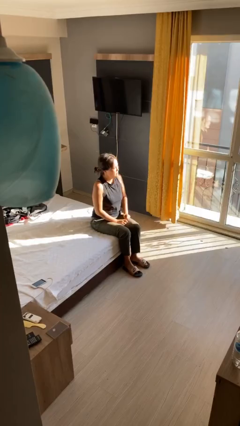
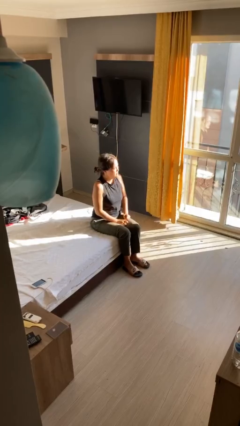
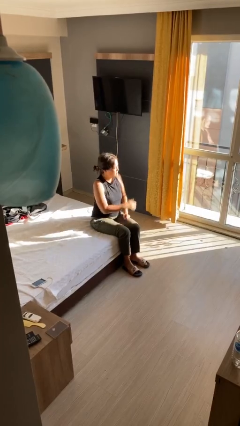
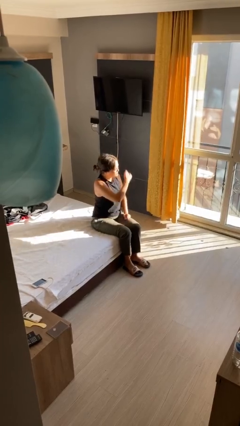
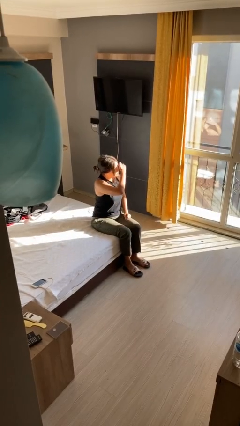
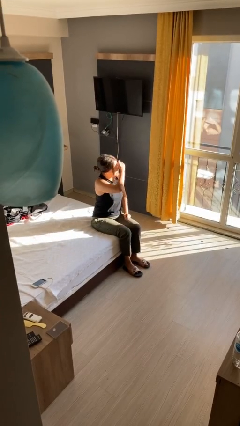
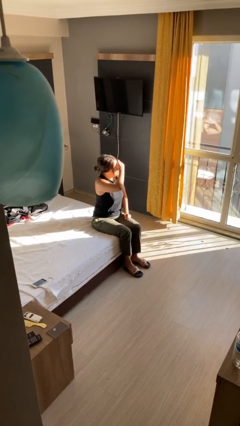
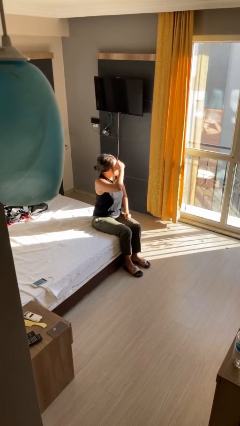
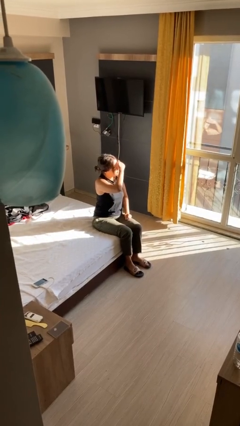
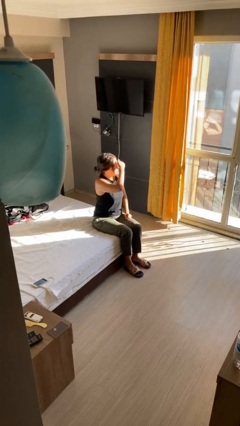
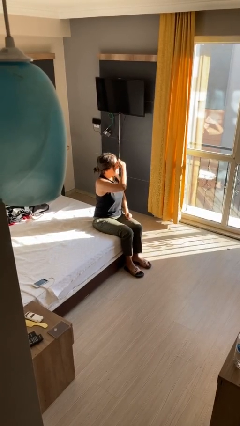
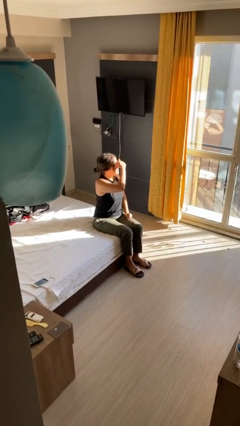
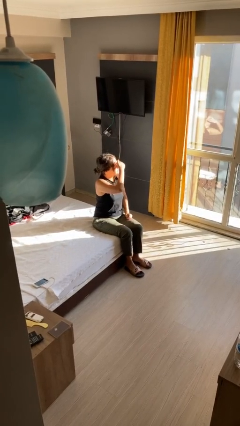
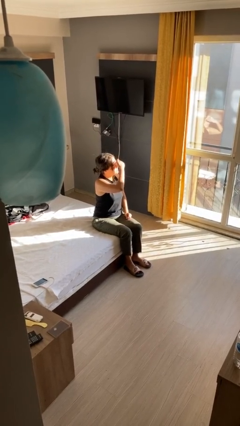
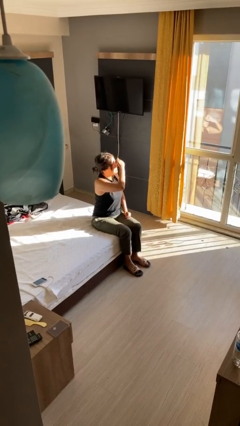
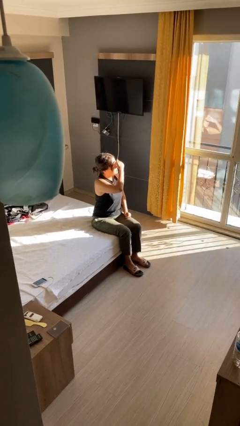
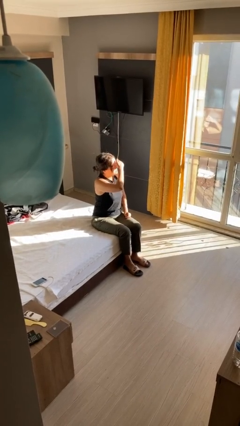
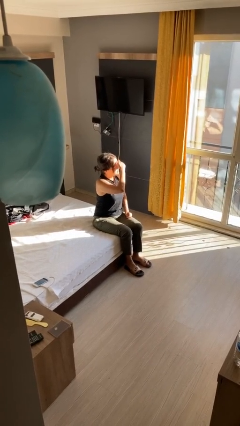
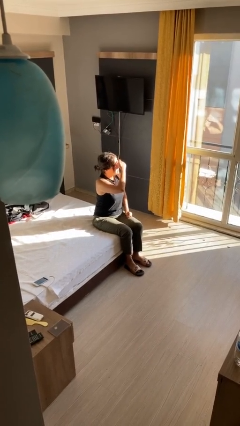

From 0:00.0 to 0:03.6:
person shades eyes

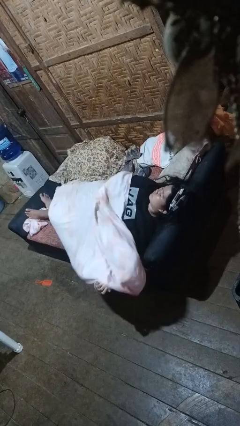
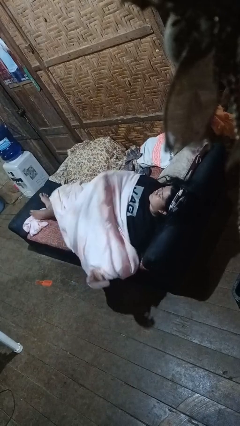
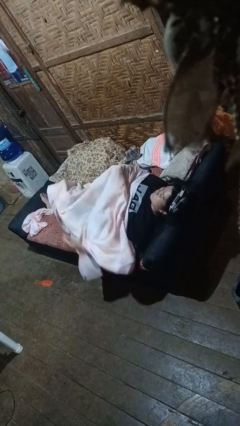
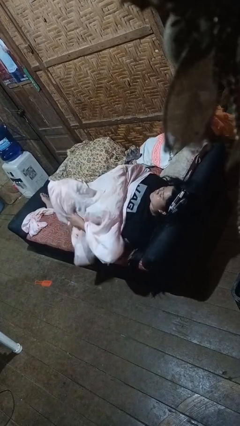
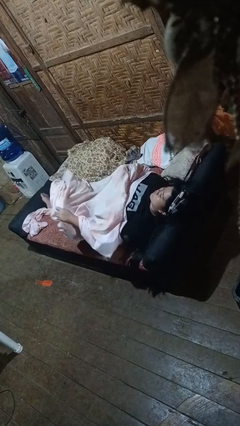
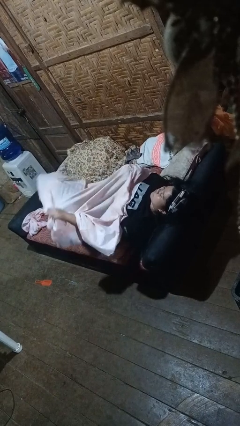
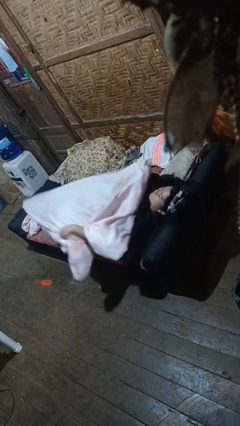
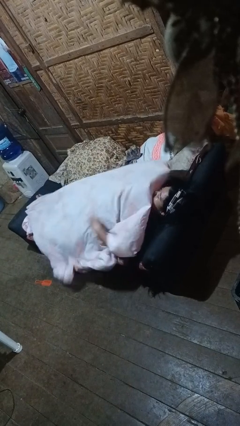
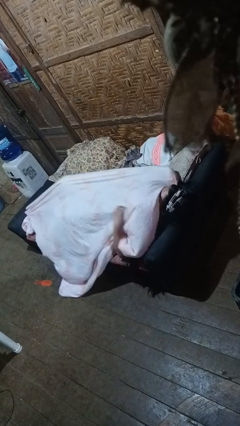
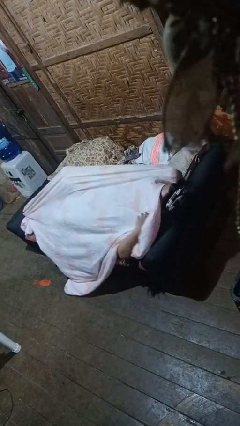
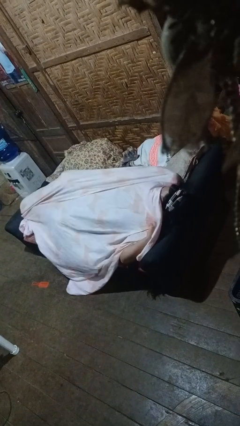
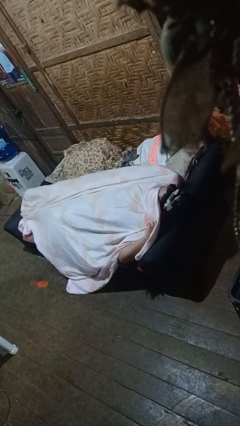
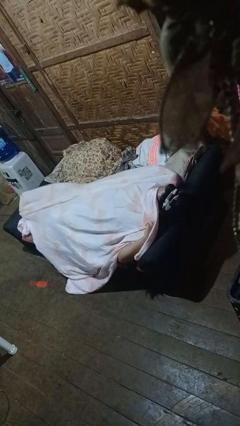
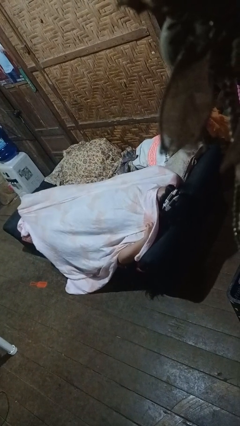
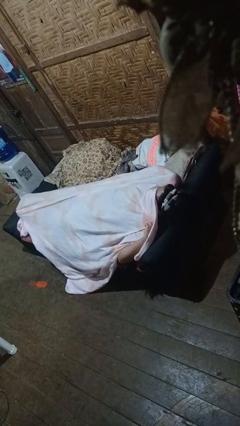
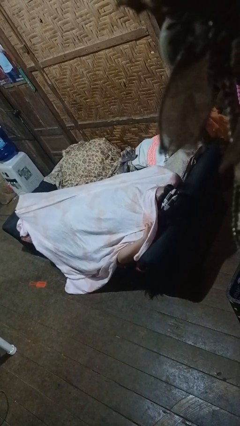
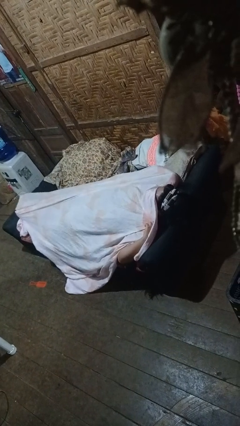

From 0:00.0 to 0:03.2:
person covers with bedsheets

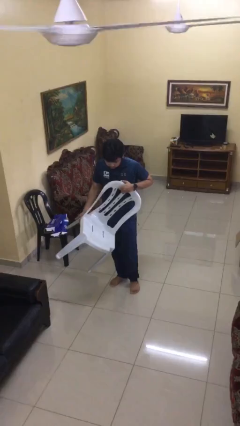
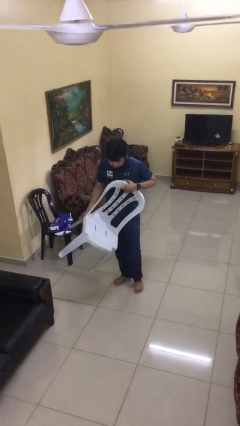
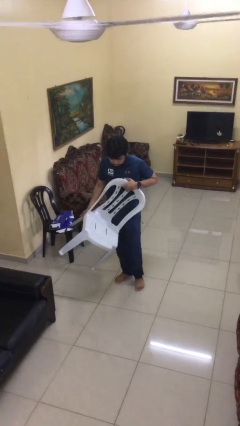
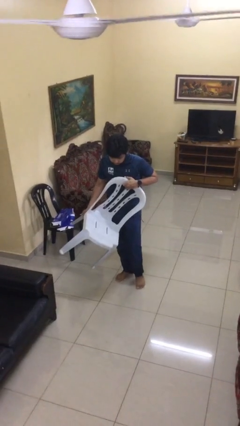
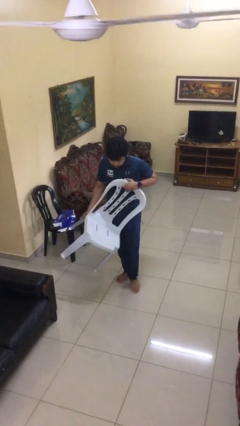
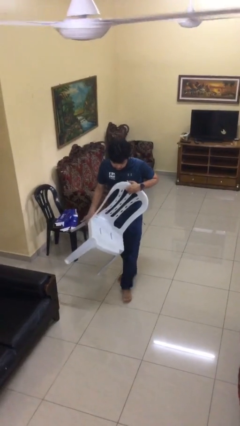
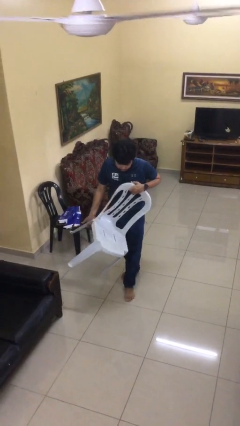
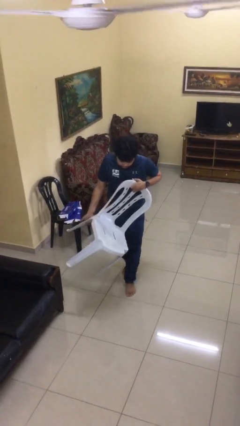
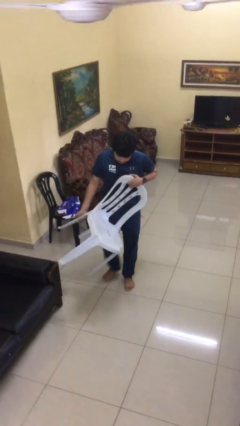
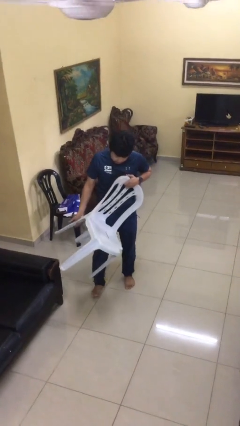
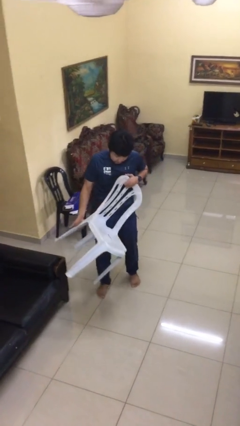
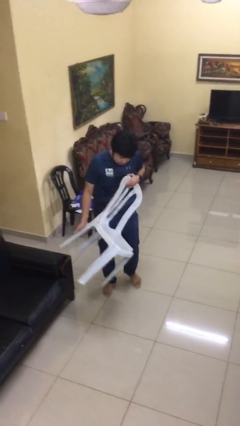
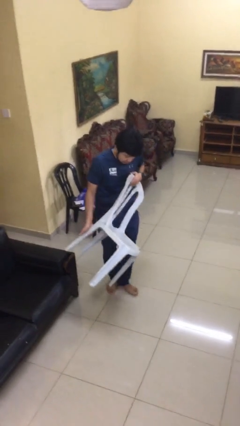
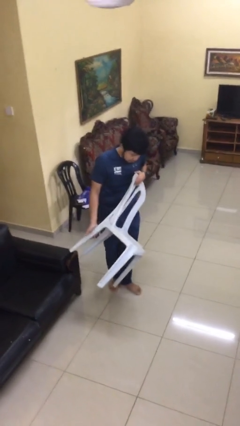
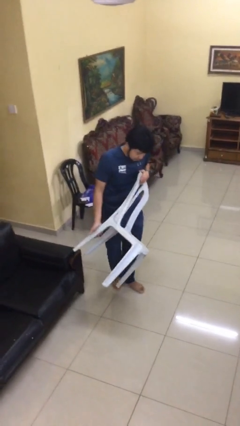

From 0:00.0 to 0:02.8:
person carries furniture

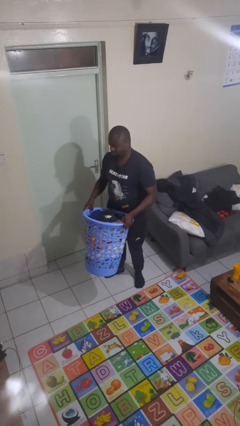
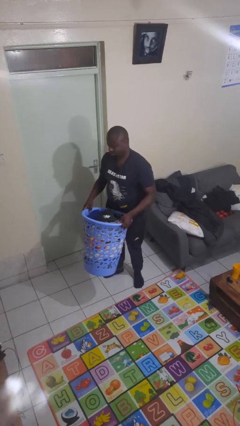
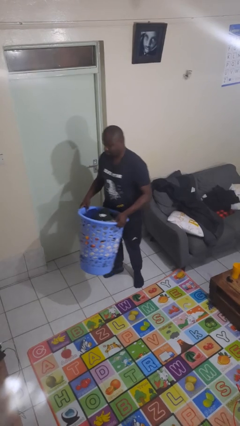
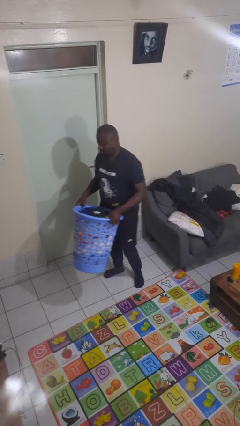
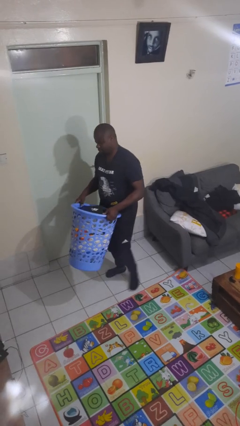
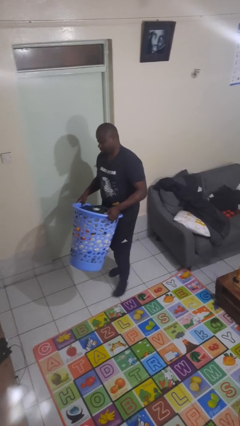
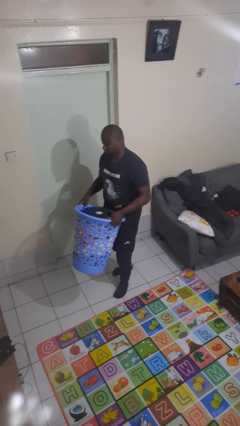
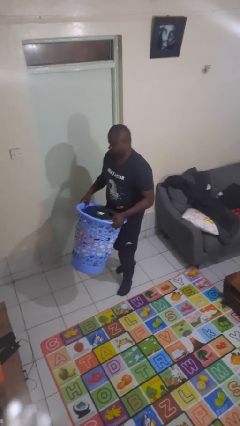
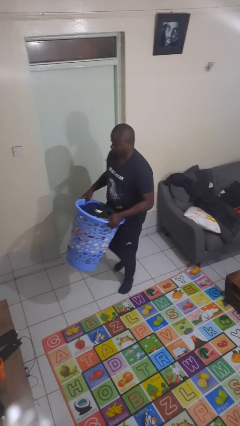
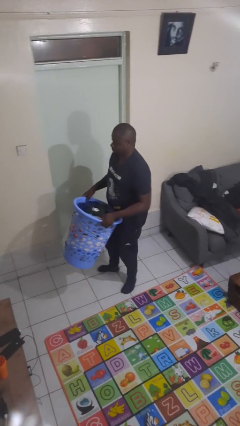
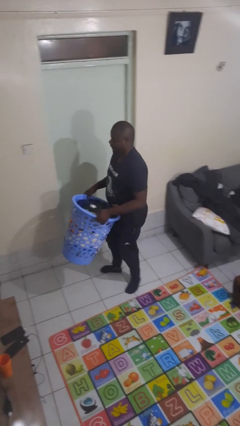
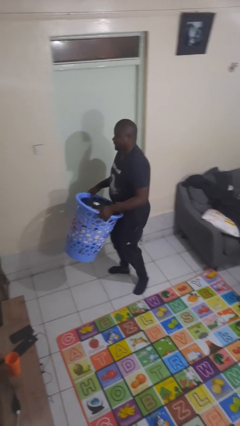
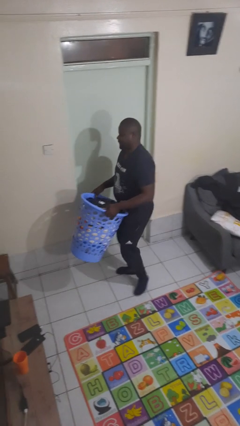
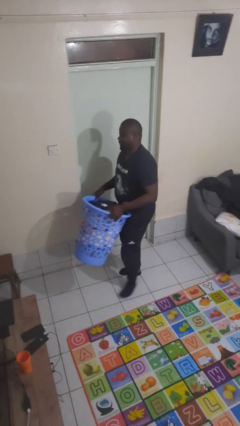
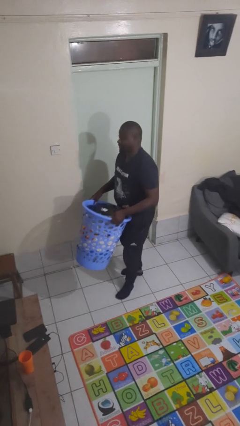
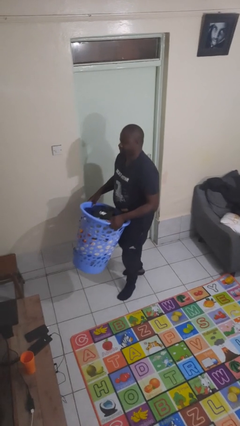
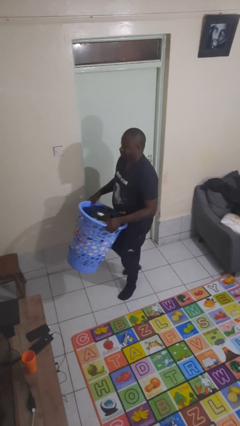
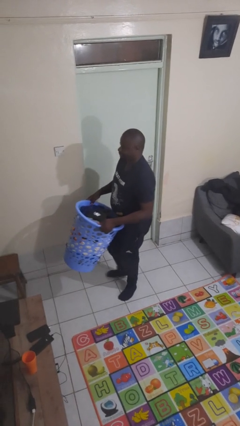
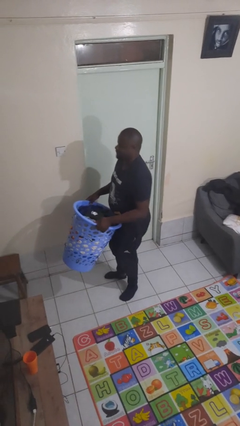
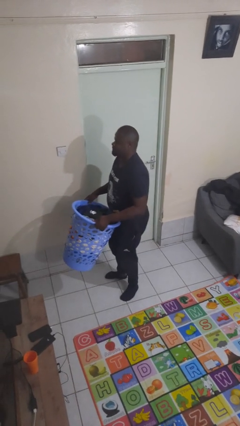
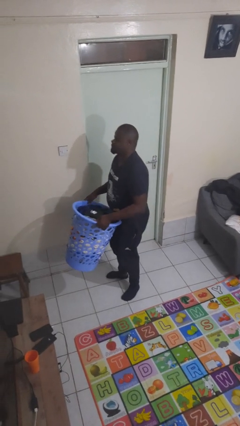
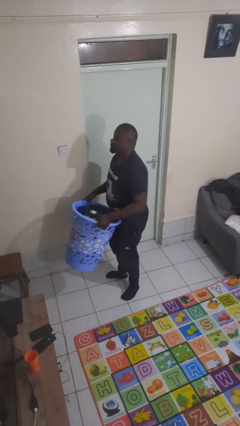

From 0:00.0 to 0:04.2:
person carries laundry basket

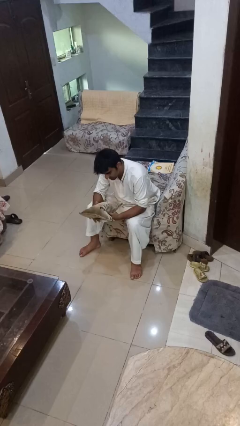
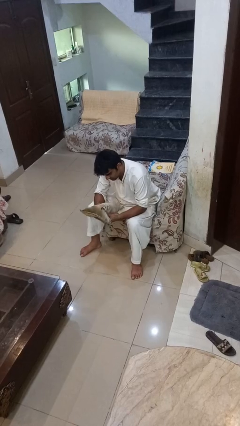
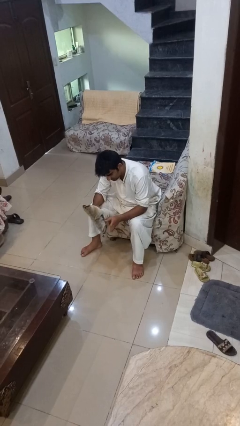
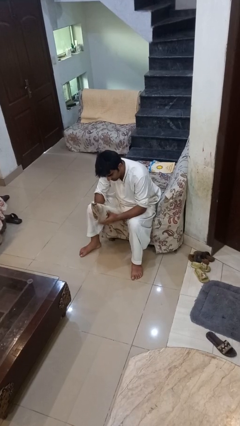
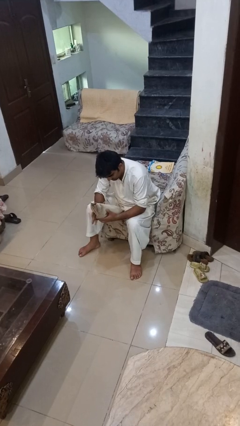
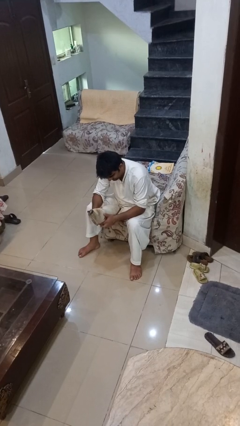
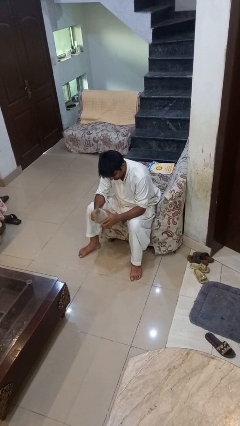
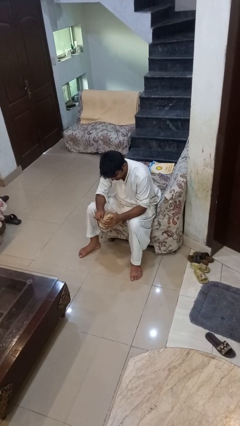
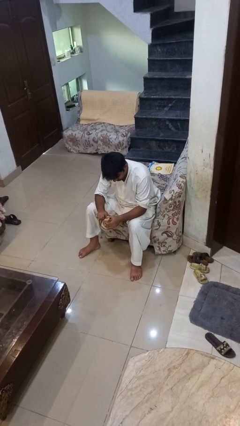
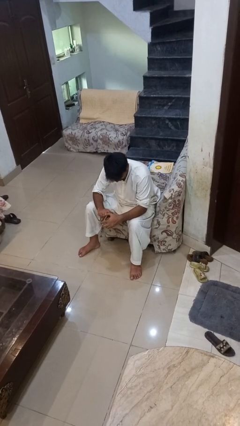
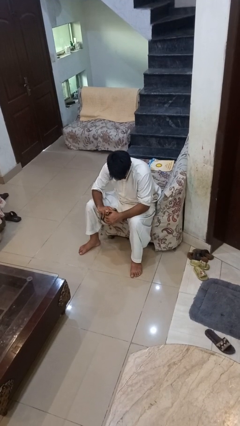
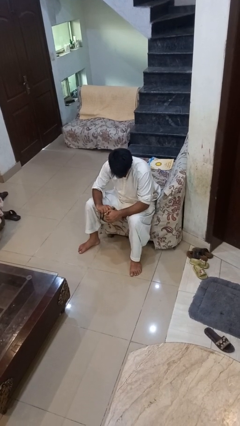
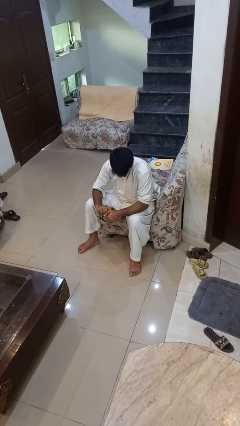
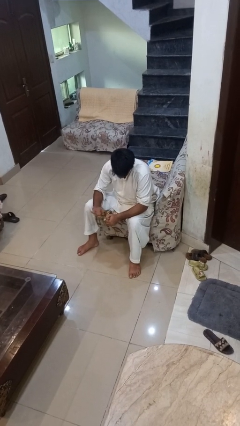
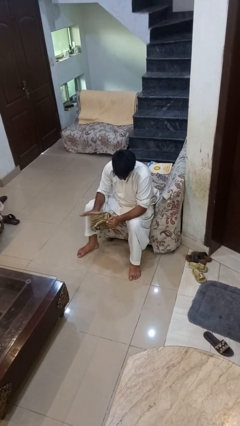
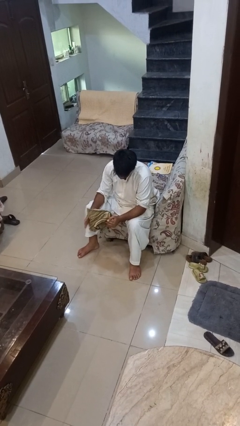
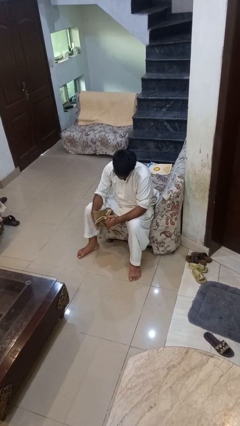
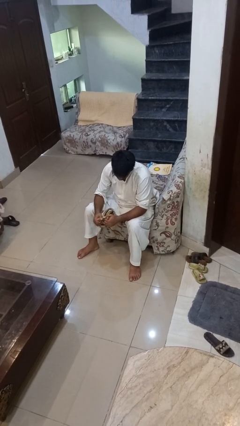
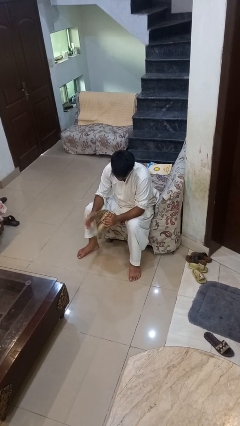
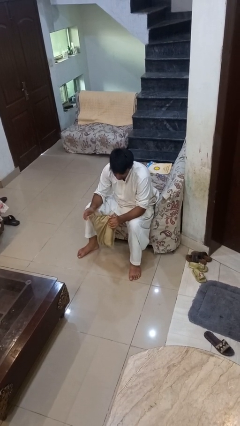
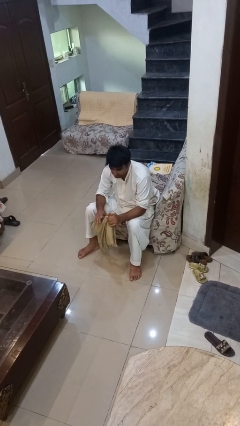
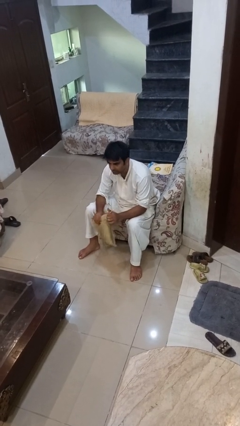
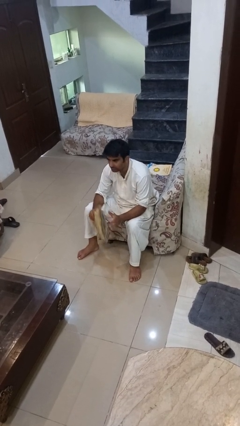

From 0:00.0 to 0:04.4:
person squeezes object
